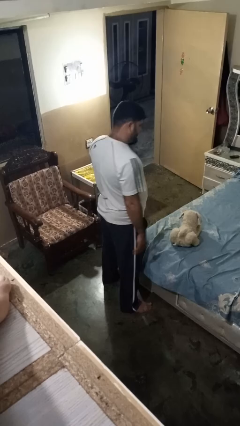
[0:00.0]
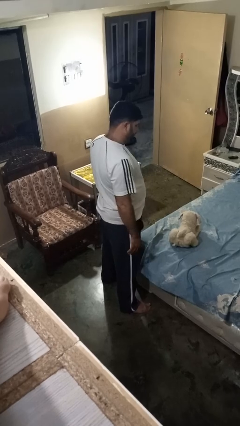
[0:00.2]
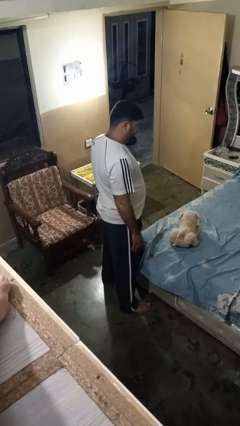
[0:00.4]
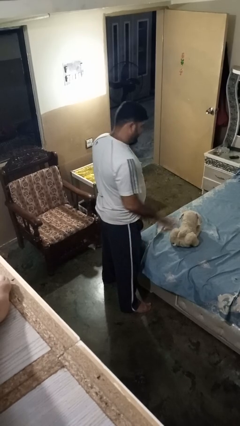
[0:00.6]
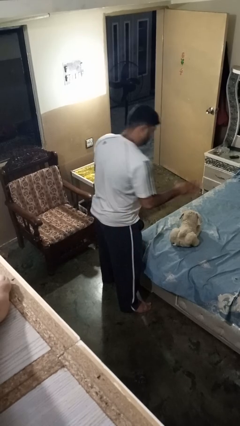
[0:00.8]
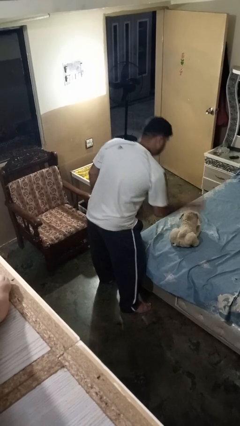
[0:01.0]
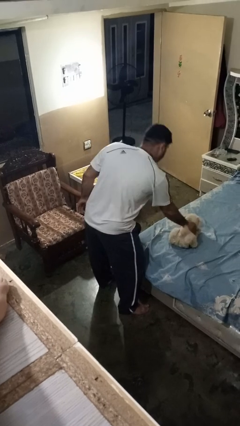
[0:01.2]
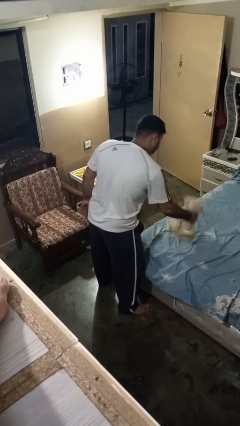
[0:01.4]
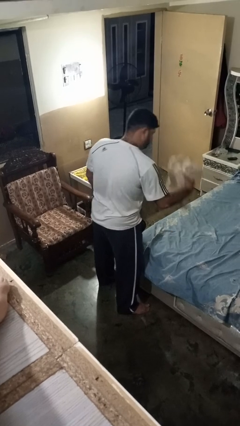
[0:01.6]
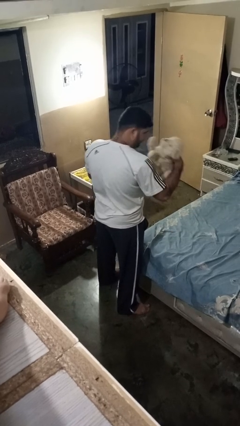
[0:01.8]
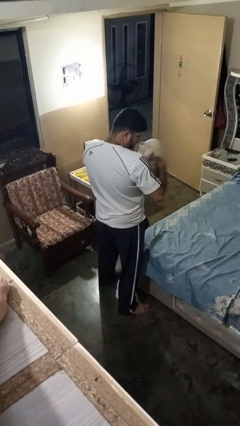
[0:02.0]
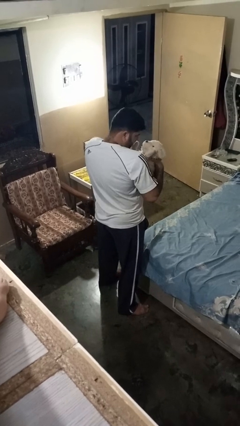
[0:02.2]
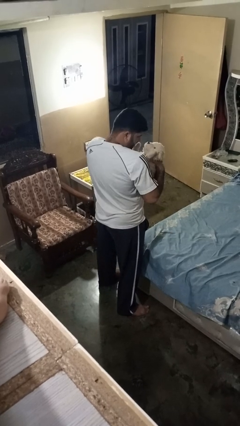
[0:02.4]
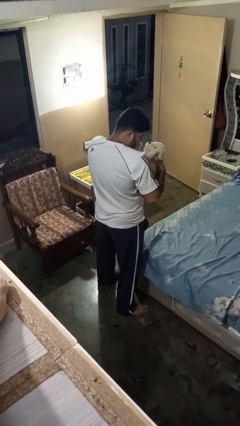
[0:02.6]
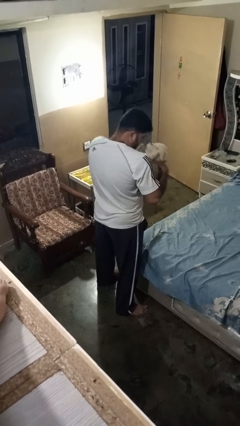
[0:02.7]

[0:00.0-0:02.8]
person hugs stuffed animal

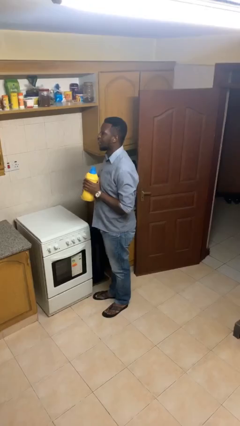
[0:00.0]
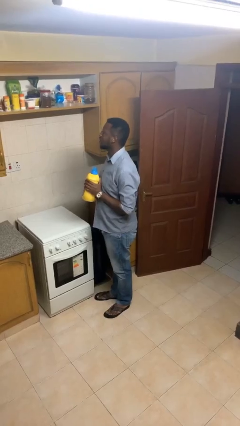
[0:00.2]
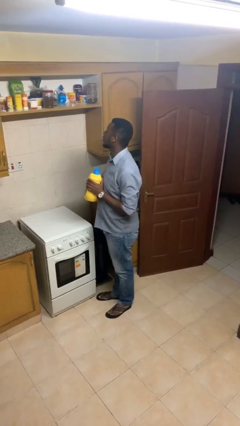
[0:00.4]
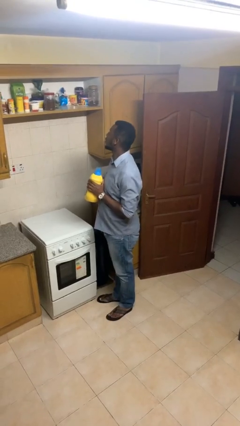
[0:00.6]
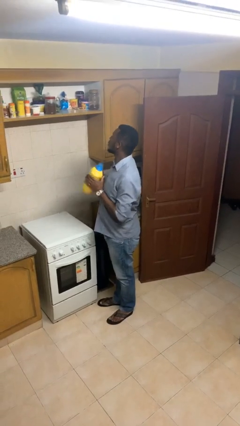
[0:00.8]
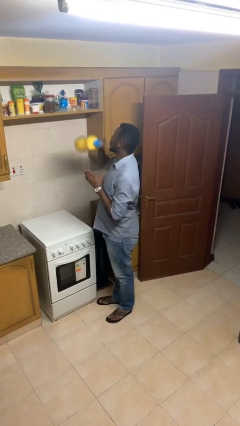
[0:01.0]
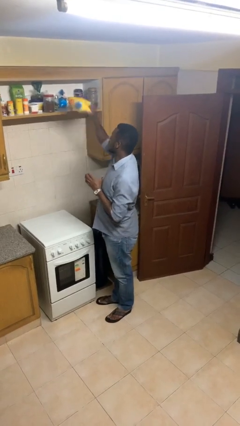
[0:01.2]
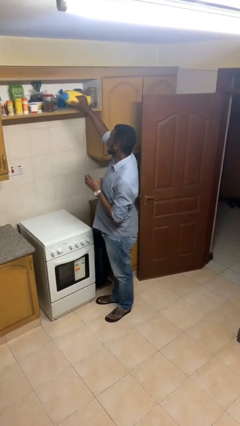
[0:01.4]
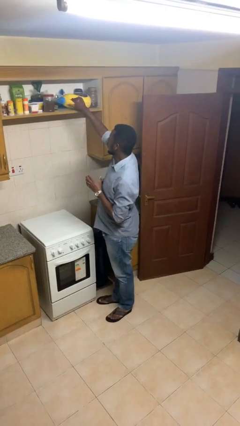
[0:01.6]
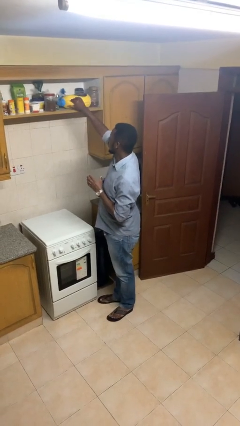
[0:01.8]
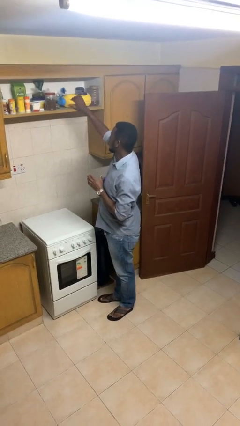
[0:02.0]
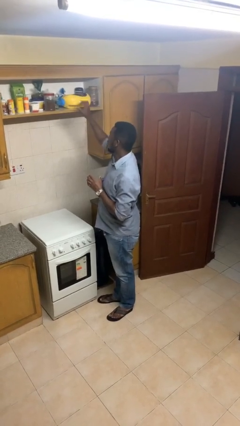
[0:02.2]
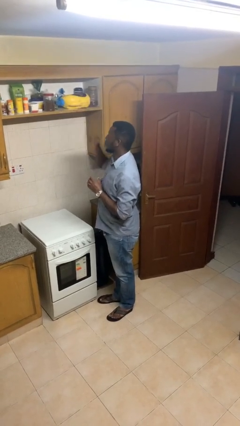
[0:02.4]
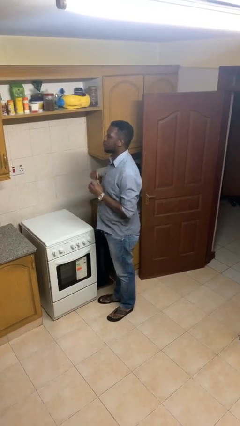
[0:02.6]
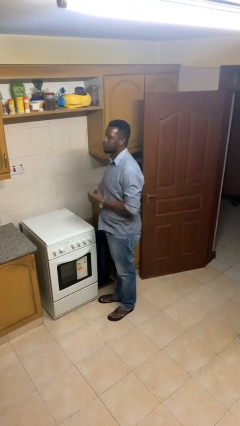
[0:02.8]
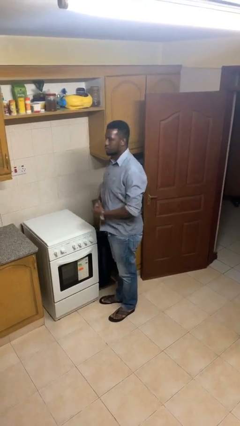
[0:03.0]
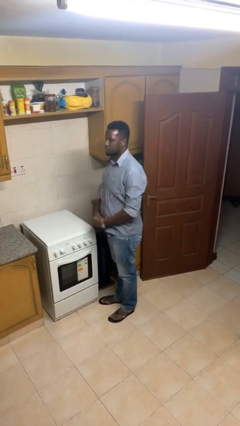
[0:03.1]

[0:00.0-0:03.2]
person puts down object on shelf

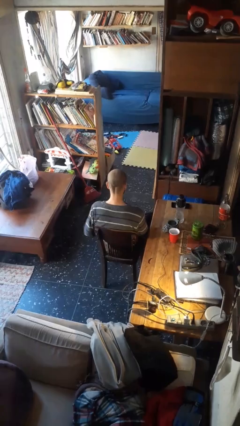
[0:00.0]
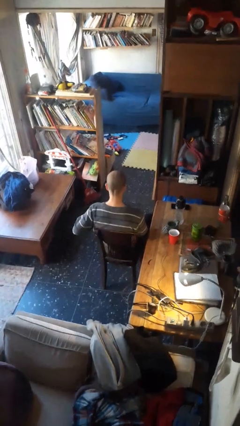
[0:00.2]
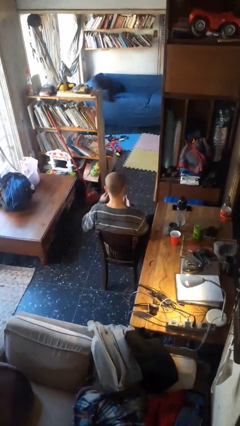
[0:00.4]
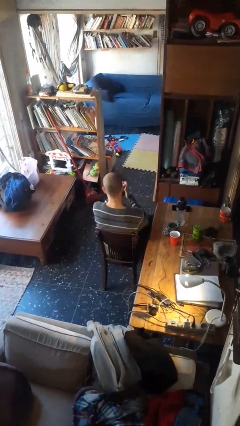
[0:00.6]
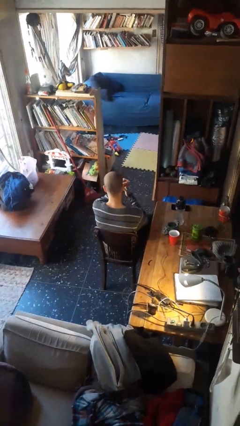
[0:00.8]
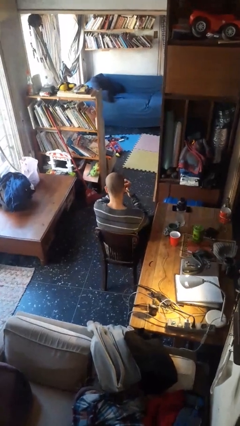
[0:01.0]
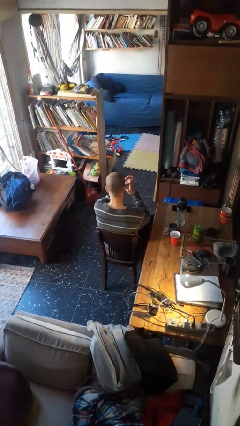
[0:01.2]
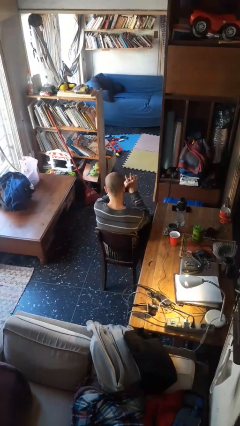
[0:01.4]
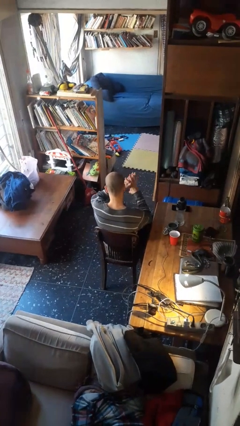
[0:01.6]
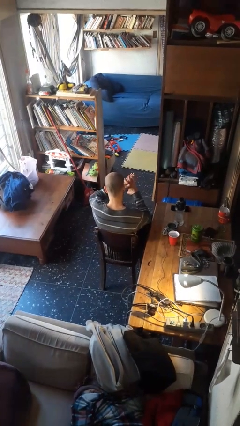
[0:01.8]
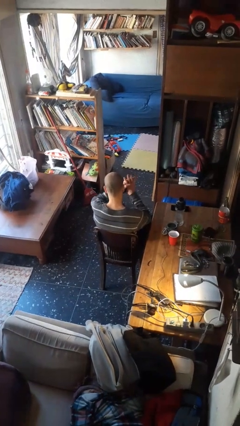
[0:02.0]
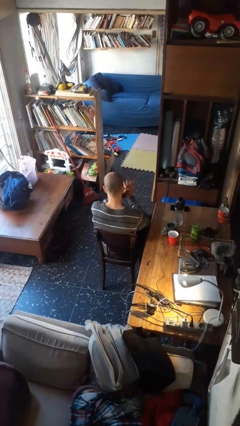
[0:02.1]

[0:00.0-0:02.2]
person snaps fingers

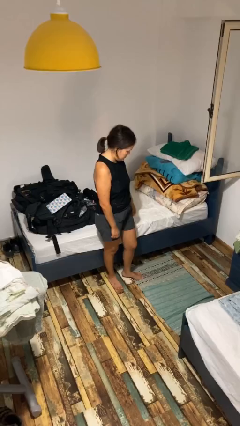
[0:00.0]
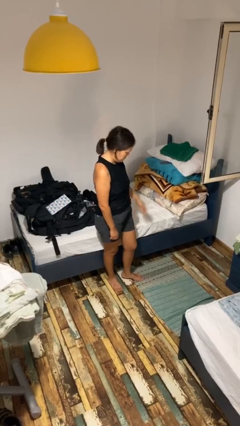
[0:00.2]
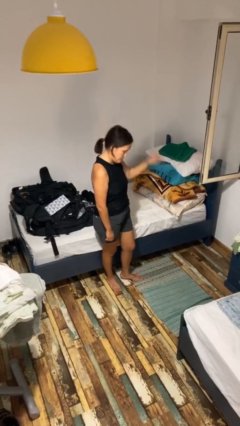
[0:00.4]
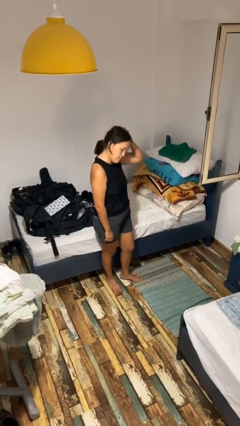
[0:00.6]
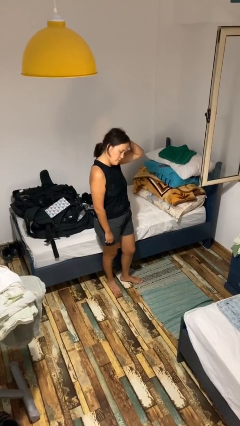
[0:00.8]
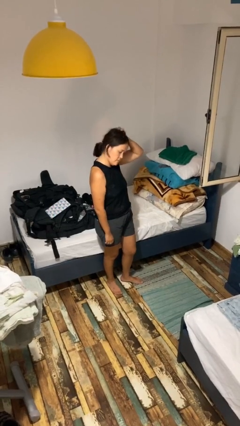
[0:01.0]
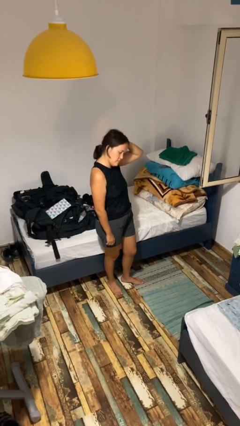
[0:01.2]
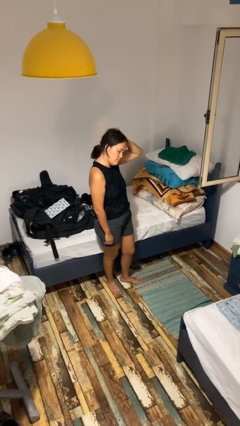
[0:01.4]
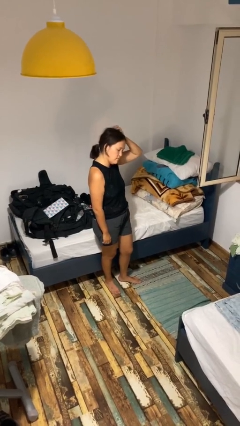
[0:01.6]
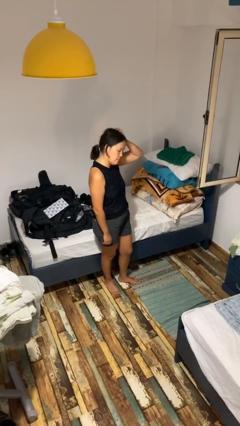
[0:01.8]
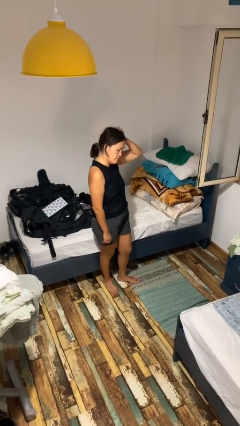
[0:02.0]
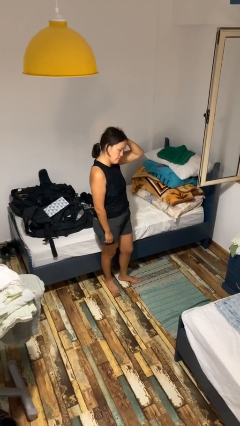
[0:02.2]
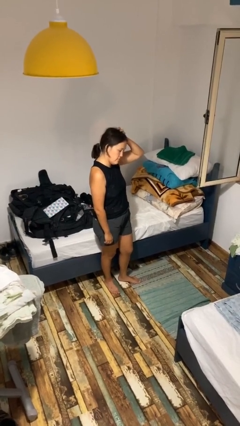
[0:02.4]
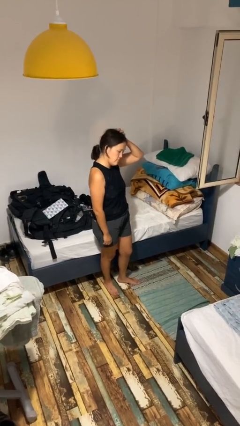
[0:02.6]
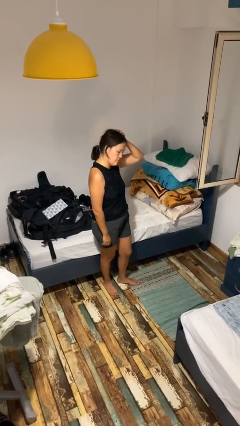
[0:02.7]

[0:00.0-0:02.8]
person scratches face

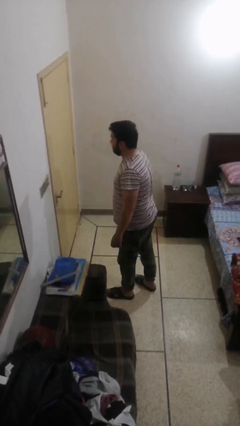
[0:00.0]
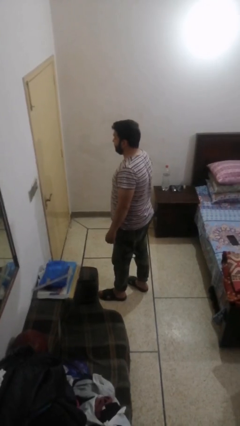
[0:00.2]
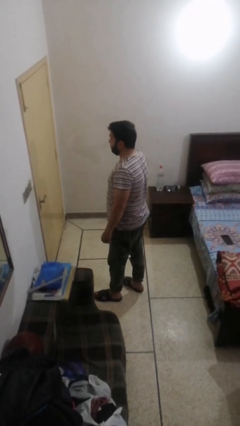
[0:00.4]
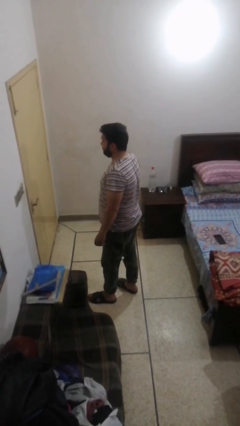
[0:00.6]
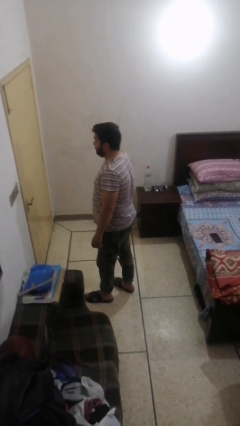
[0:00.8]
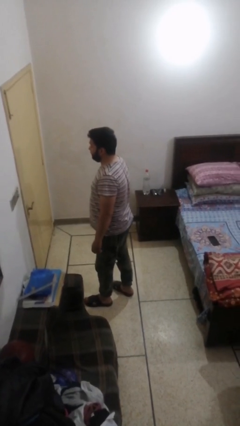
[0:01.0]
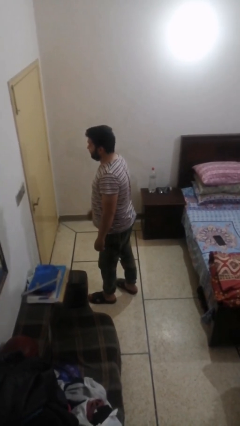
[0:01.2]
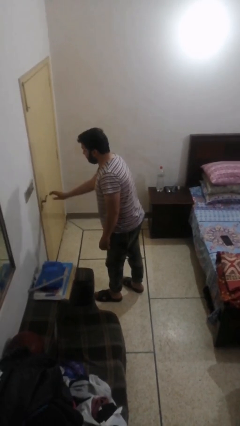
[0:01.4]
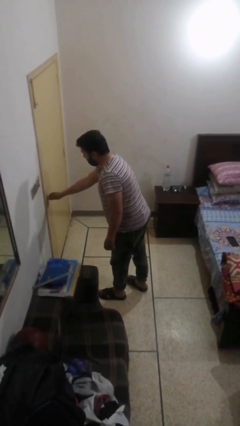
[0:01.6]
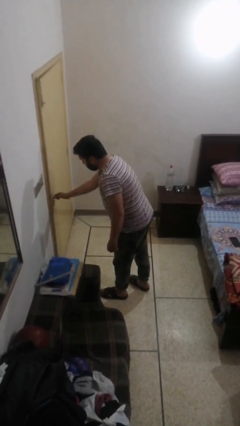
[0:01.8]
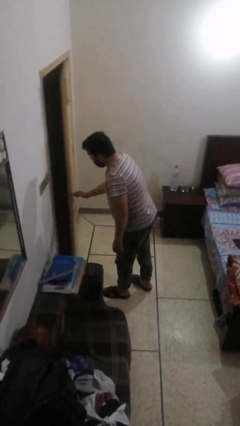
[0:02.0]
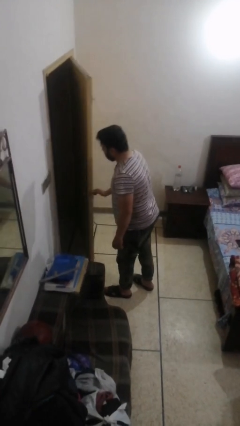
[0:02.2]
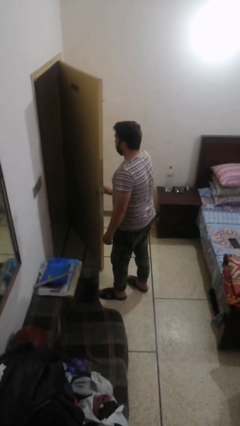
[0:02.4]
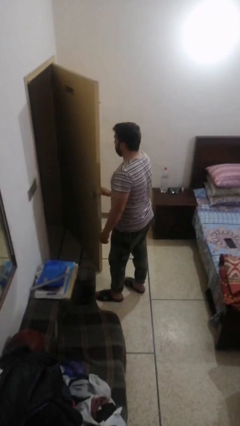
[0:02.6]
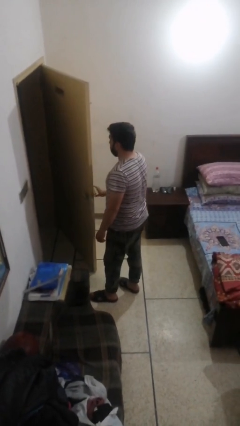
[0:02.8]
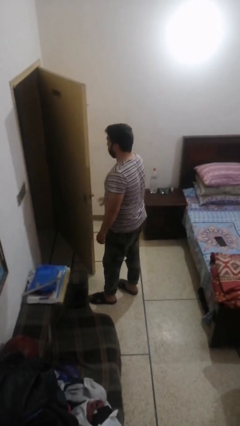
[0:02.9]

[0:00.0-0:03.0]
person closes facility door

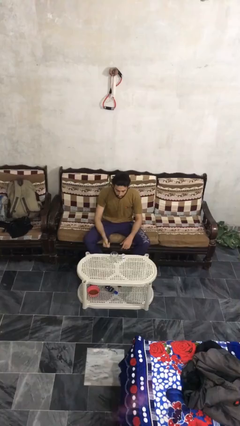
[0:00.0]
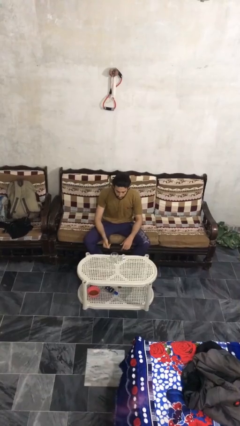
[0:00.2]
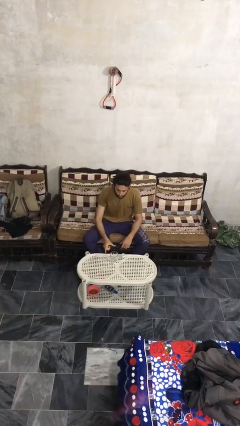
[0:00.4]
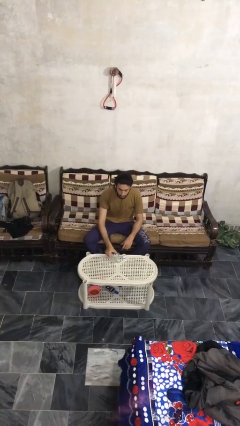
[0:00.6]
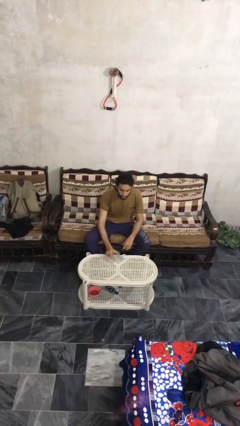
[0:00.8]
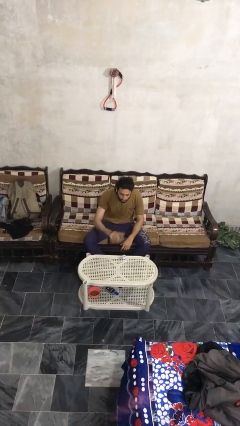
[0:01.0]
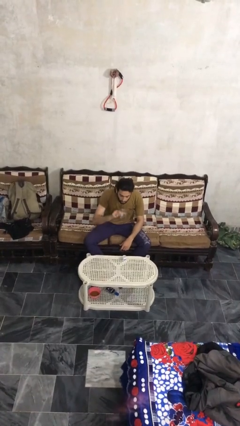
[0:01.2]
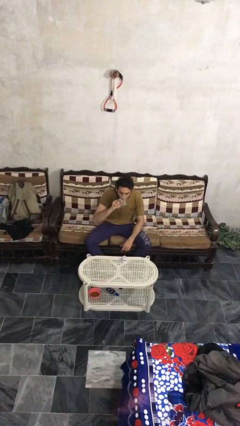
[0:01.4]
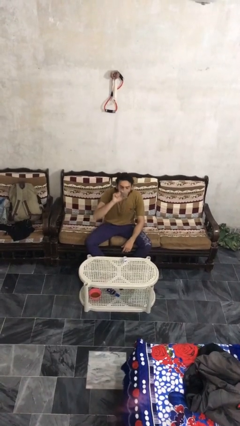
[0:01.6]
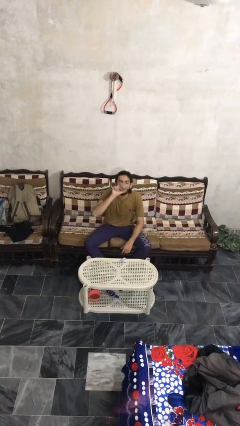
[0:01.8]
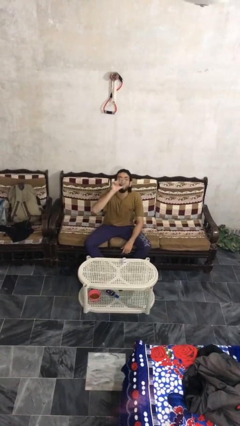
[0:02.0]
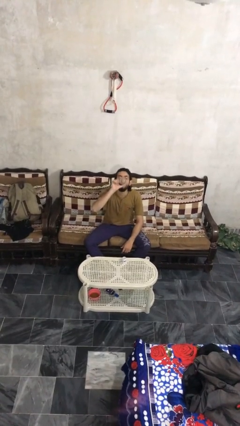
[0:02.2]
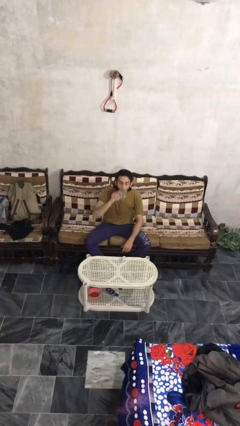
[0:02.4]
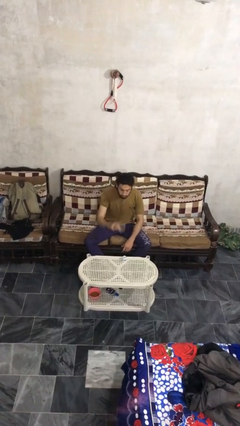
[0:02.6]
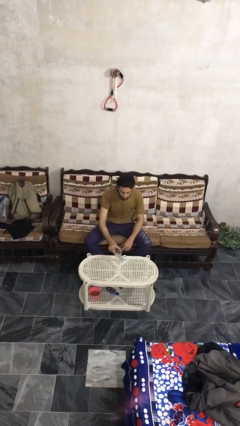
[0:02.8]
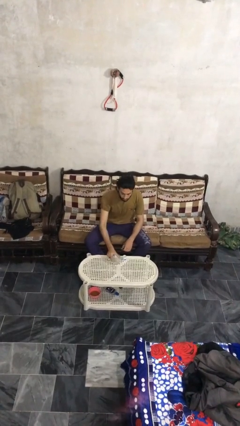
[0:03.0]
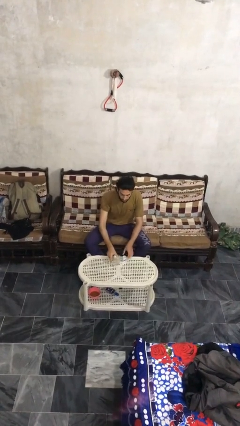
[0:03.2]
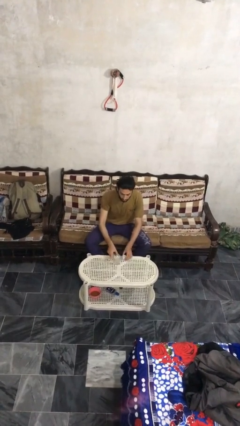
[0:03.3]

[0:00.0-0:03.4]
person drinks from cup
